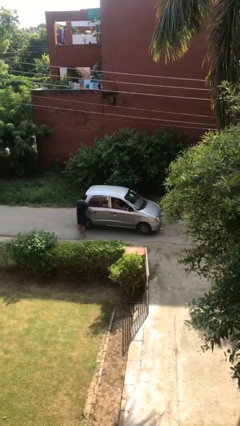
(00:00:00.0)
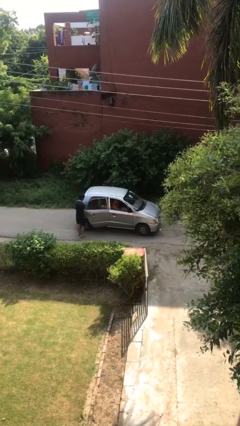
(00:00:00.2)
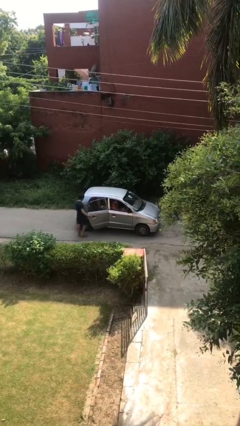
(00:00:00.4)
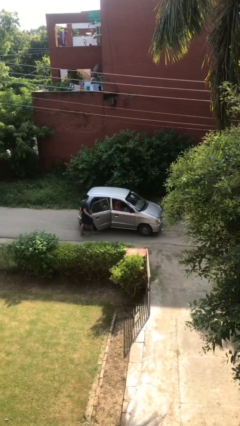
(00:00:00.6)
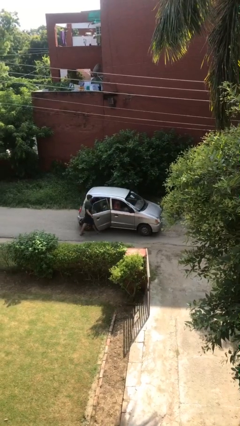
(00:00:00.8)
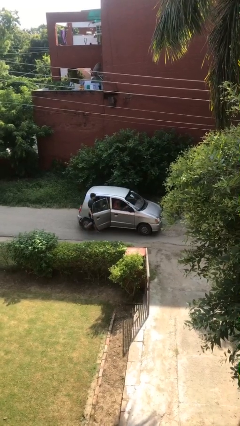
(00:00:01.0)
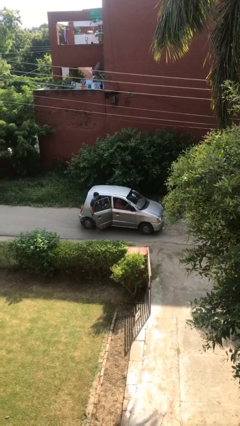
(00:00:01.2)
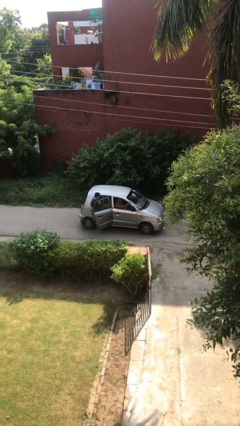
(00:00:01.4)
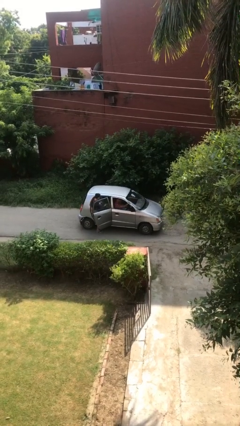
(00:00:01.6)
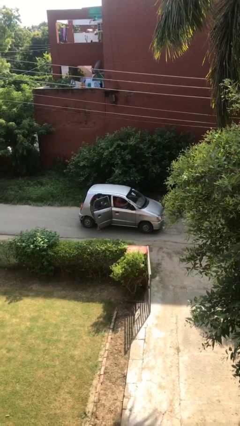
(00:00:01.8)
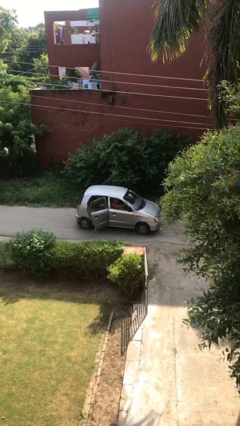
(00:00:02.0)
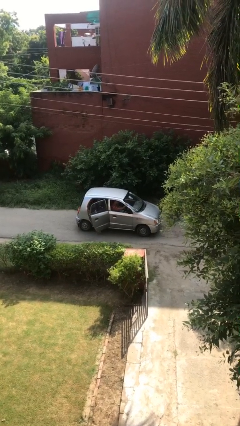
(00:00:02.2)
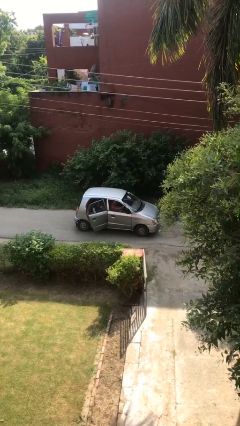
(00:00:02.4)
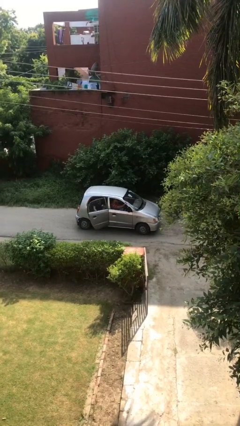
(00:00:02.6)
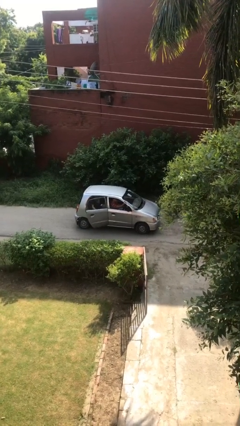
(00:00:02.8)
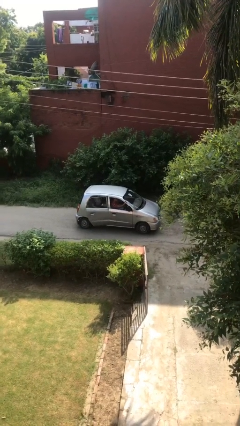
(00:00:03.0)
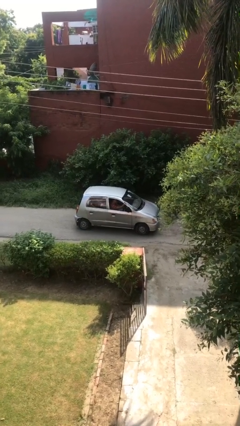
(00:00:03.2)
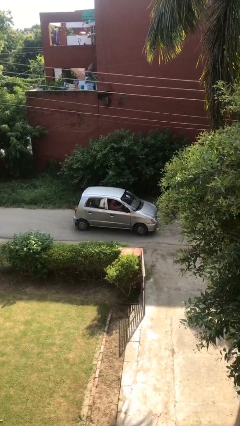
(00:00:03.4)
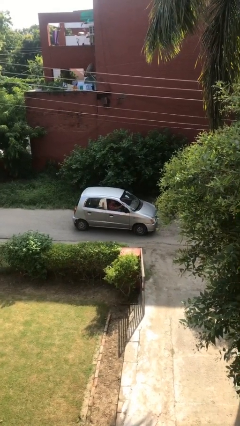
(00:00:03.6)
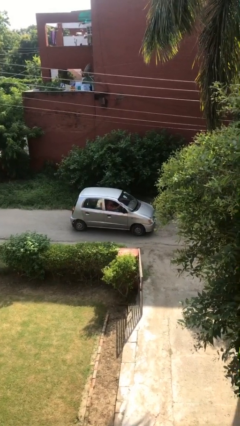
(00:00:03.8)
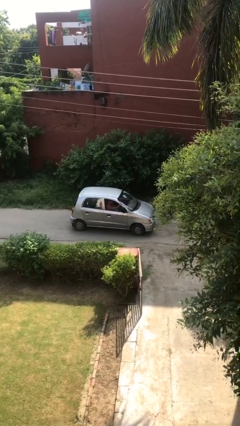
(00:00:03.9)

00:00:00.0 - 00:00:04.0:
car picks up person

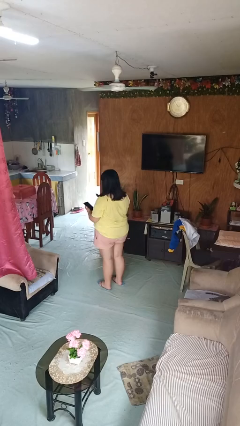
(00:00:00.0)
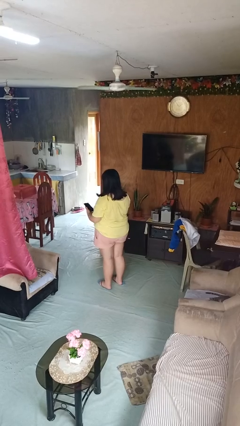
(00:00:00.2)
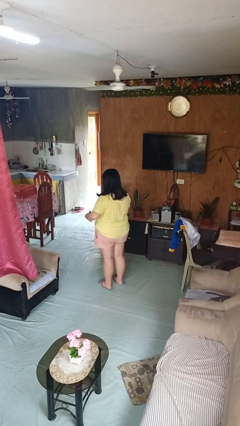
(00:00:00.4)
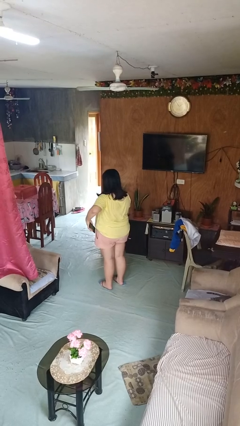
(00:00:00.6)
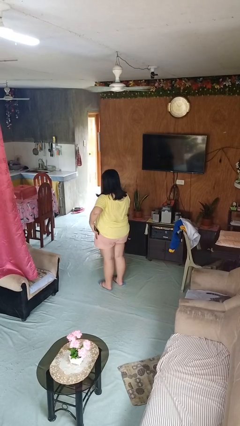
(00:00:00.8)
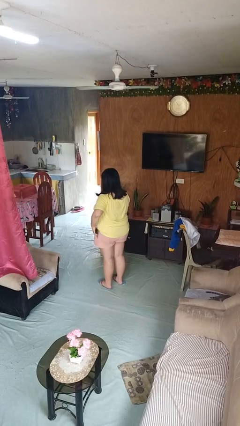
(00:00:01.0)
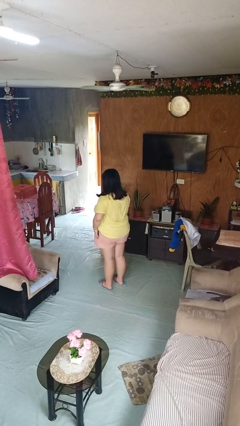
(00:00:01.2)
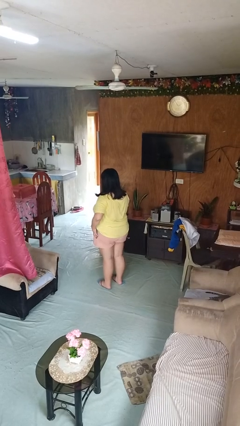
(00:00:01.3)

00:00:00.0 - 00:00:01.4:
person puts phone into pocket

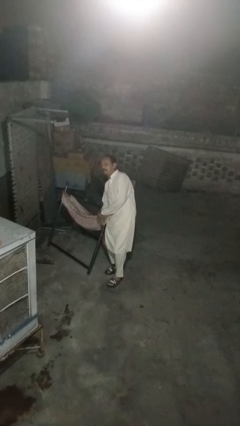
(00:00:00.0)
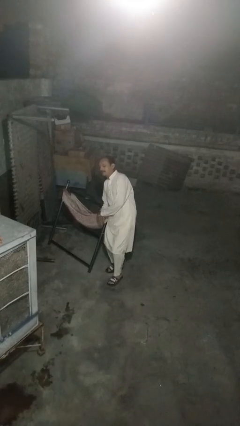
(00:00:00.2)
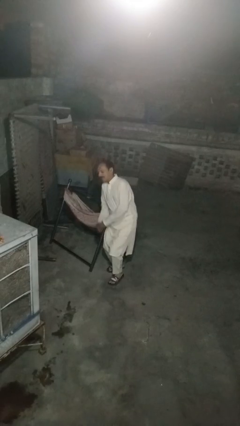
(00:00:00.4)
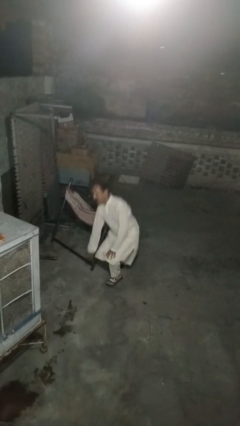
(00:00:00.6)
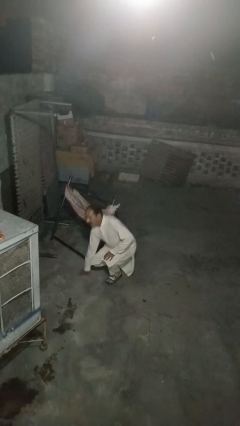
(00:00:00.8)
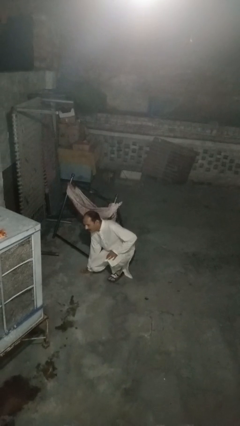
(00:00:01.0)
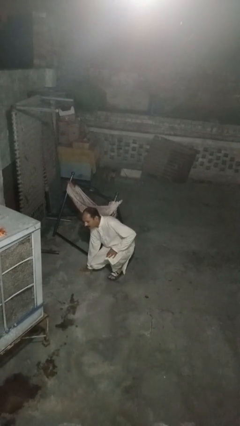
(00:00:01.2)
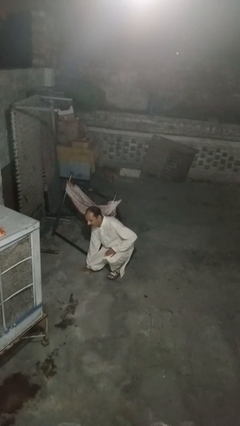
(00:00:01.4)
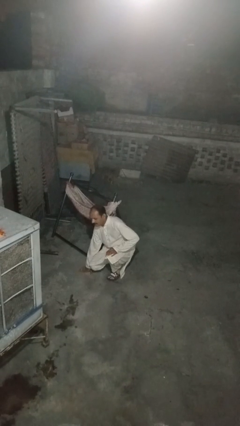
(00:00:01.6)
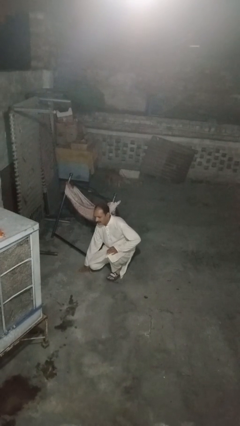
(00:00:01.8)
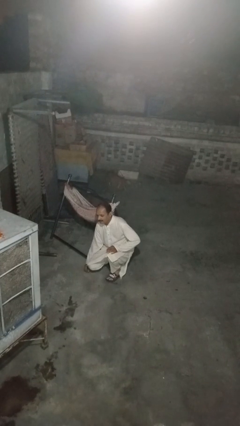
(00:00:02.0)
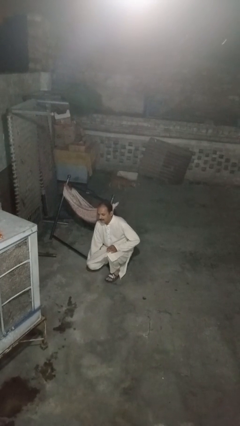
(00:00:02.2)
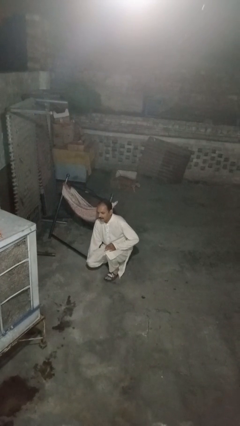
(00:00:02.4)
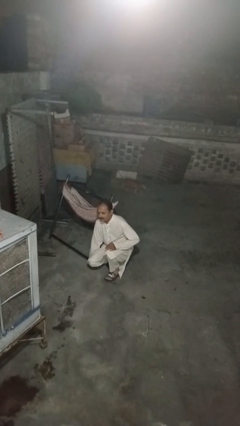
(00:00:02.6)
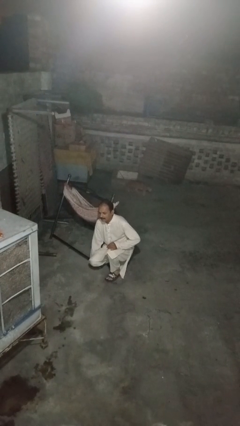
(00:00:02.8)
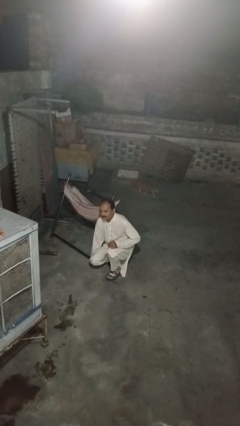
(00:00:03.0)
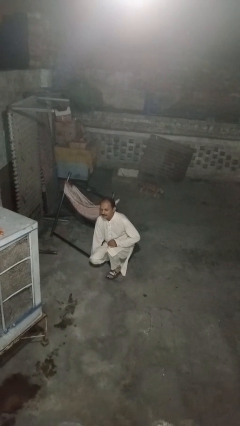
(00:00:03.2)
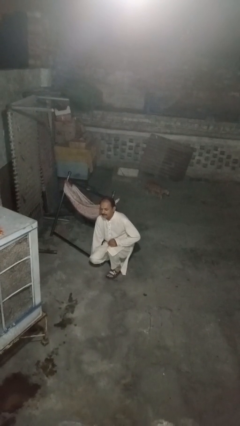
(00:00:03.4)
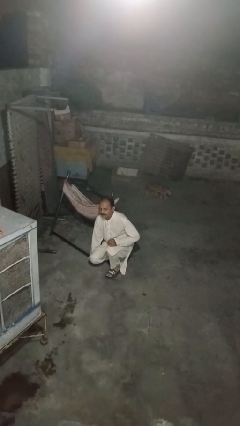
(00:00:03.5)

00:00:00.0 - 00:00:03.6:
person falls while standing

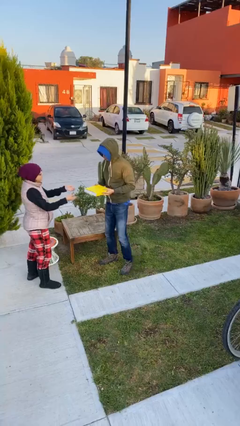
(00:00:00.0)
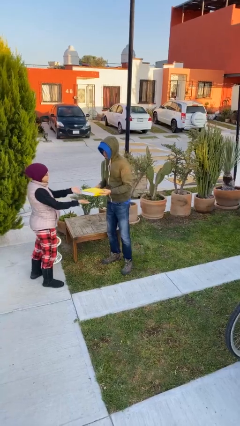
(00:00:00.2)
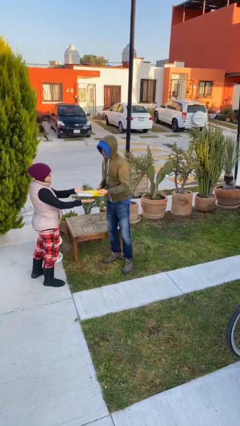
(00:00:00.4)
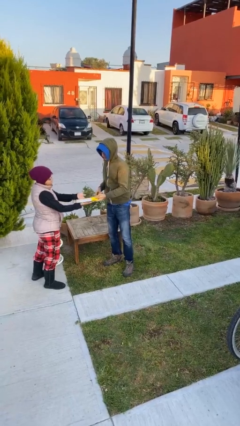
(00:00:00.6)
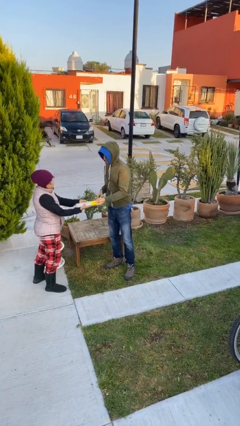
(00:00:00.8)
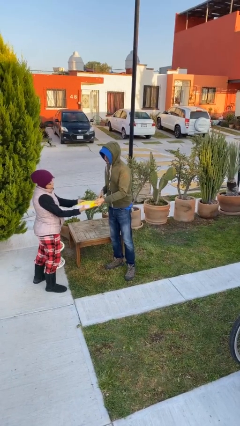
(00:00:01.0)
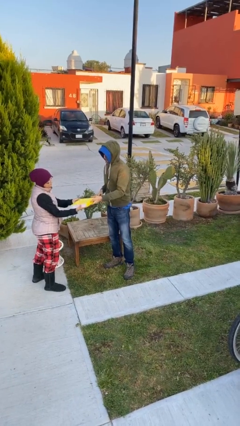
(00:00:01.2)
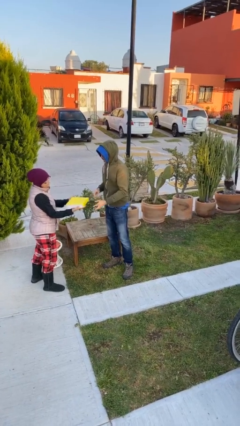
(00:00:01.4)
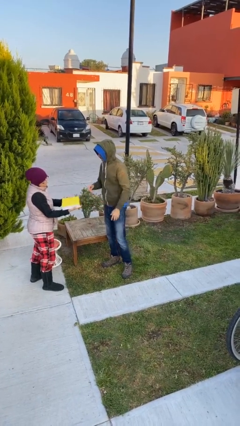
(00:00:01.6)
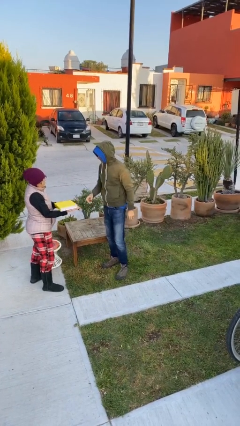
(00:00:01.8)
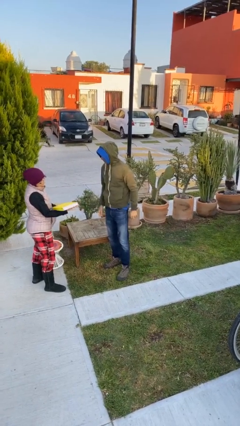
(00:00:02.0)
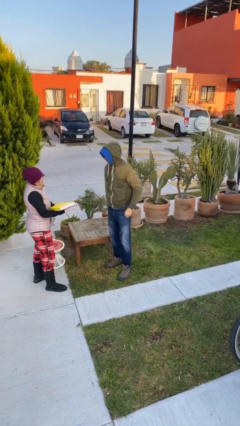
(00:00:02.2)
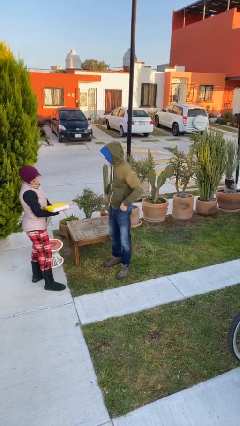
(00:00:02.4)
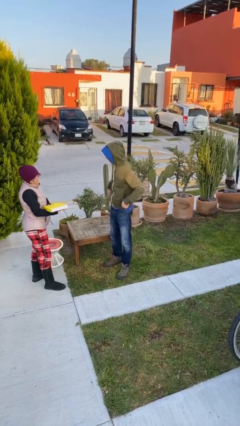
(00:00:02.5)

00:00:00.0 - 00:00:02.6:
person transfers object to person

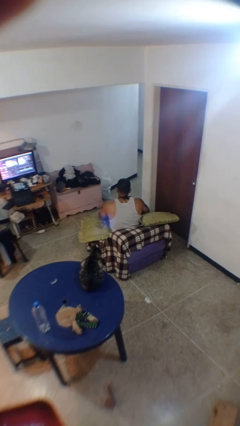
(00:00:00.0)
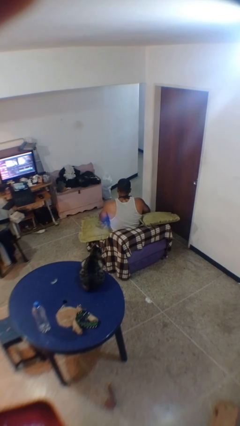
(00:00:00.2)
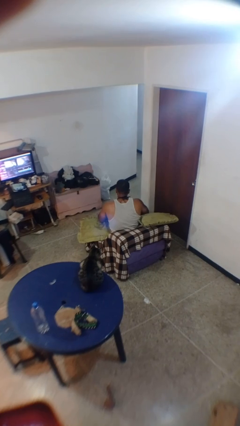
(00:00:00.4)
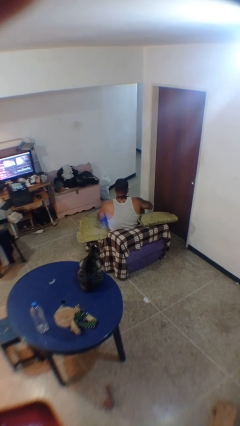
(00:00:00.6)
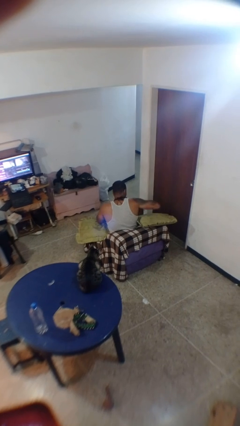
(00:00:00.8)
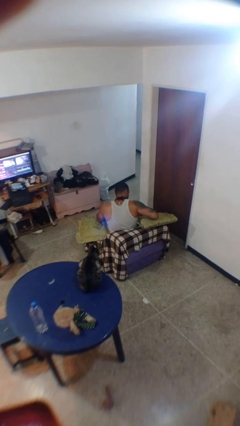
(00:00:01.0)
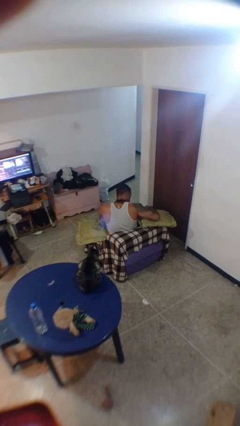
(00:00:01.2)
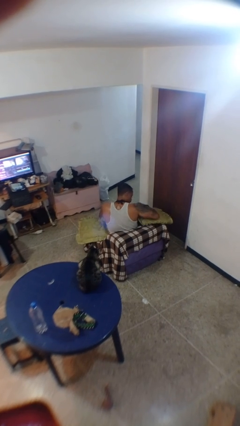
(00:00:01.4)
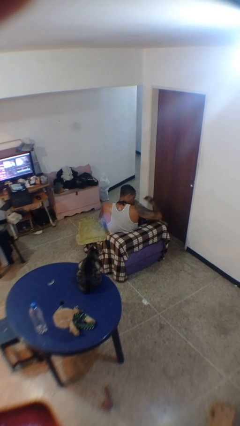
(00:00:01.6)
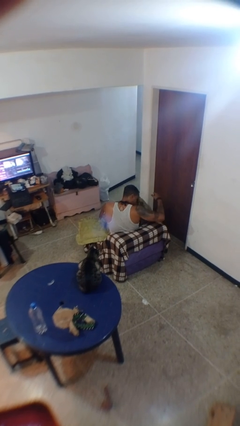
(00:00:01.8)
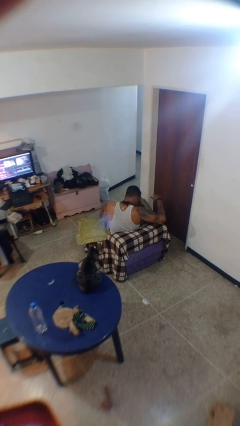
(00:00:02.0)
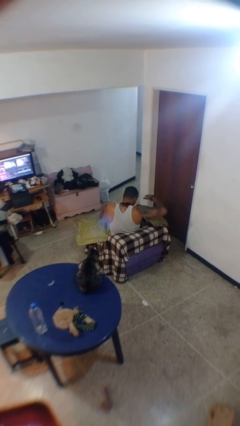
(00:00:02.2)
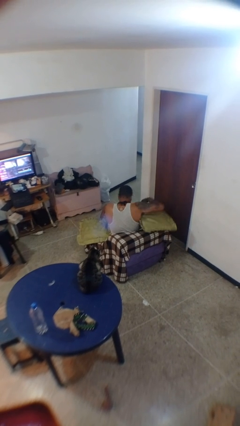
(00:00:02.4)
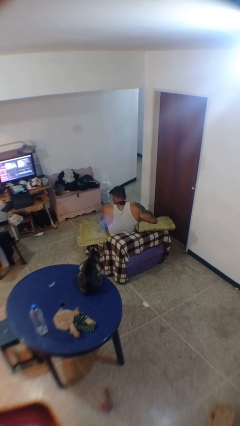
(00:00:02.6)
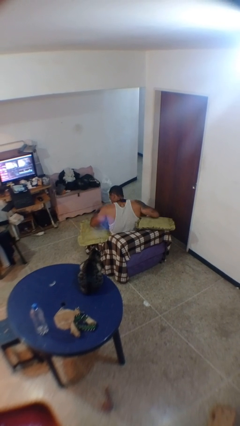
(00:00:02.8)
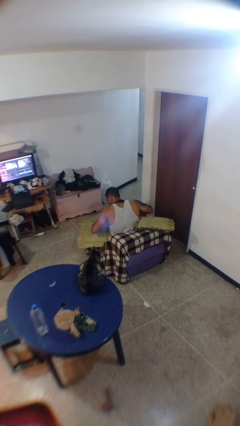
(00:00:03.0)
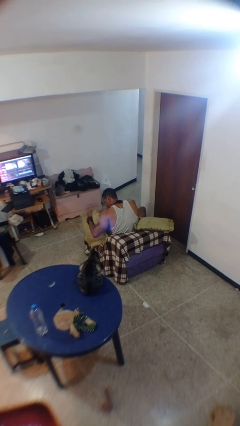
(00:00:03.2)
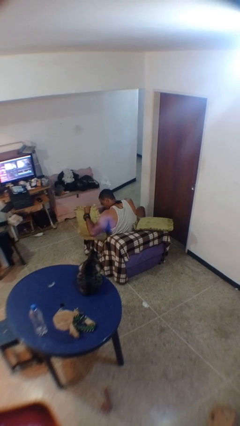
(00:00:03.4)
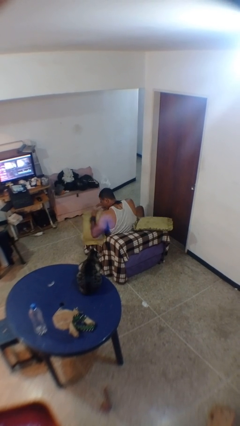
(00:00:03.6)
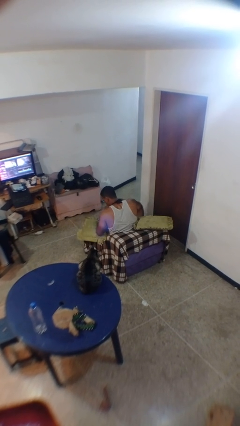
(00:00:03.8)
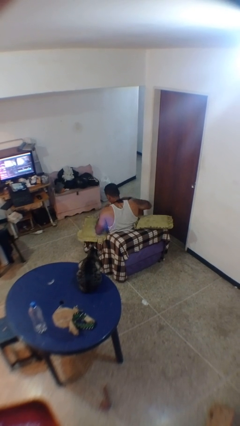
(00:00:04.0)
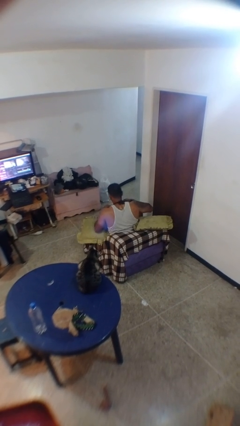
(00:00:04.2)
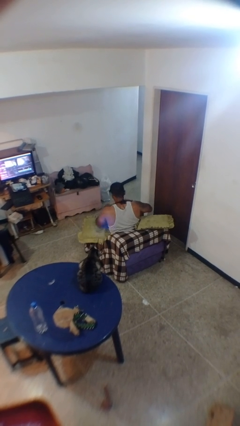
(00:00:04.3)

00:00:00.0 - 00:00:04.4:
person searches in couch

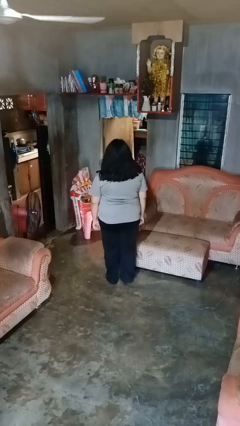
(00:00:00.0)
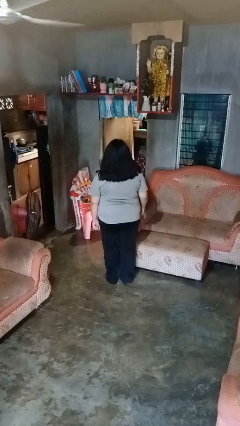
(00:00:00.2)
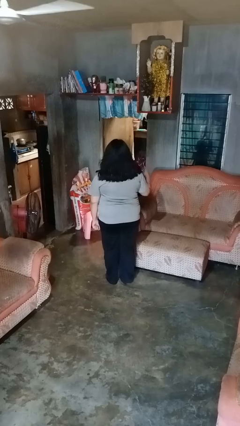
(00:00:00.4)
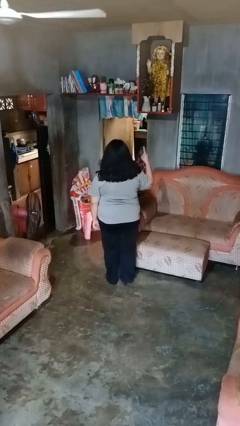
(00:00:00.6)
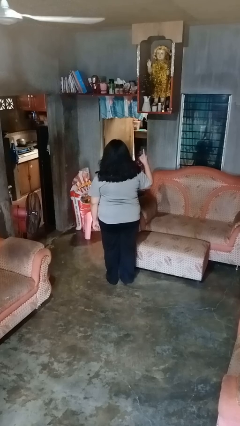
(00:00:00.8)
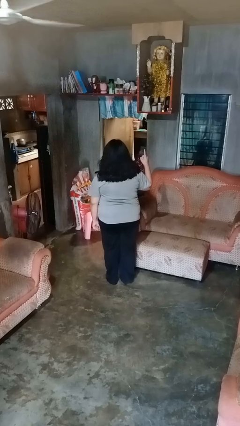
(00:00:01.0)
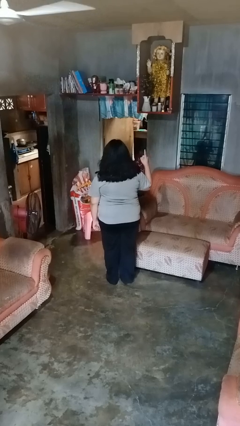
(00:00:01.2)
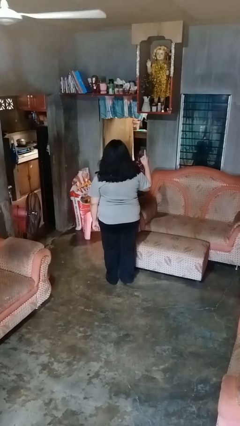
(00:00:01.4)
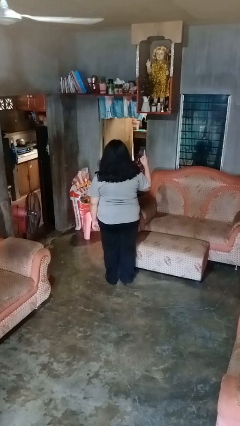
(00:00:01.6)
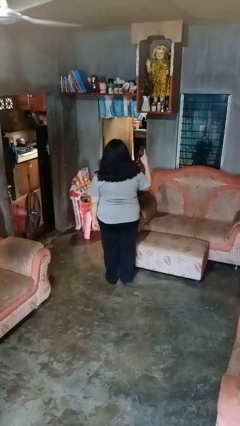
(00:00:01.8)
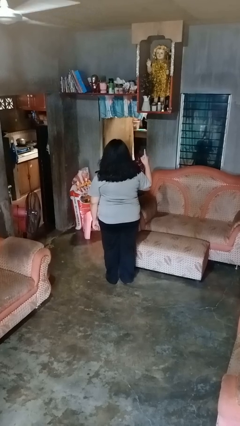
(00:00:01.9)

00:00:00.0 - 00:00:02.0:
person gestures number one
